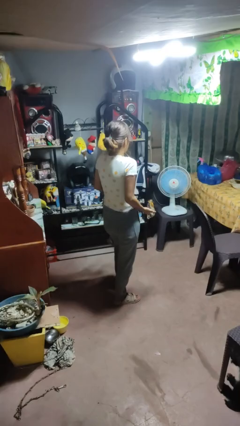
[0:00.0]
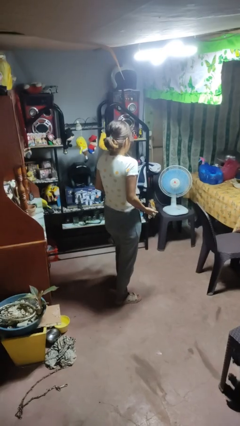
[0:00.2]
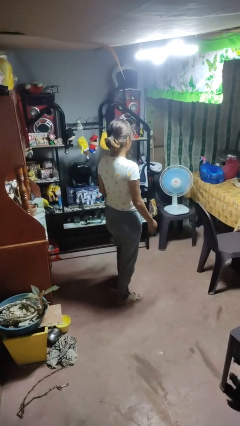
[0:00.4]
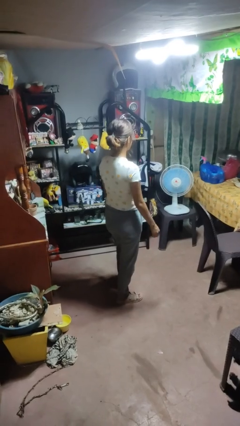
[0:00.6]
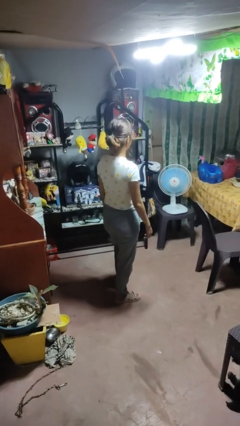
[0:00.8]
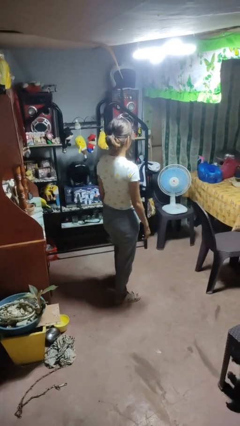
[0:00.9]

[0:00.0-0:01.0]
person shrugs

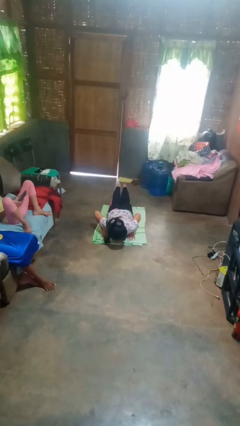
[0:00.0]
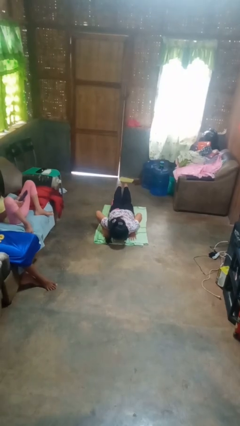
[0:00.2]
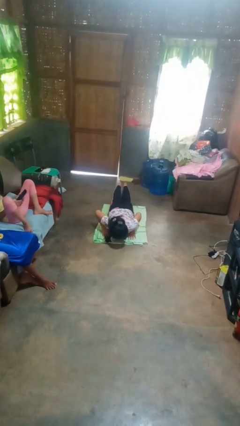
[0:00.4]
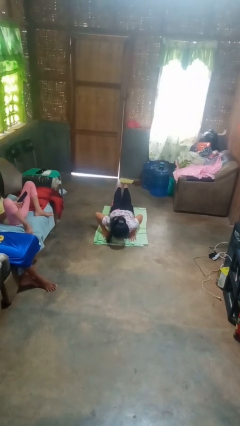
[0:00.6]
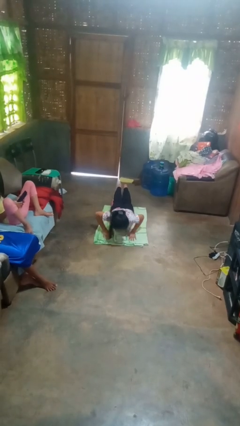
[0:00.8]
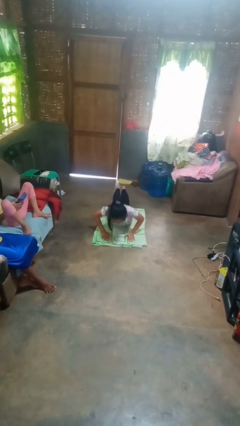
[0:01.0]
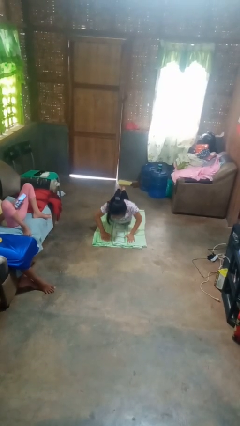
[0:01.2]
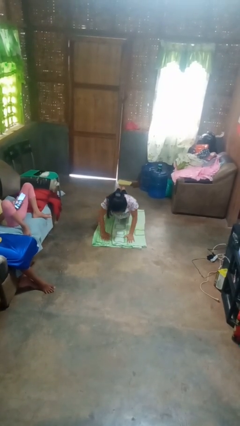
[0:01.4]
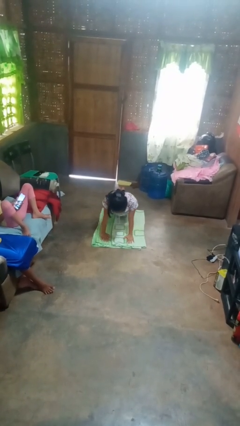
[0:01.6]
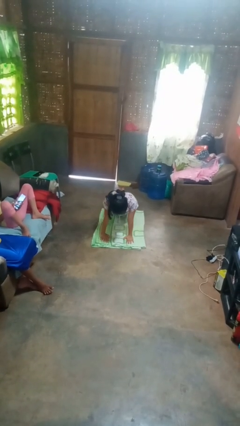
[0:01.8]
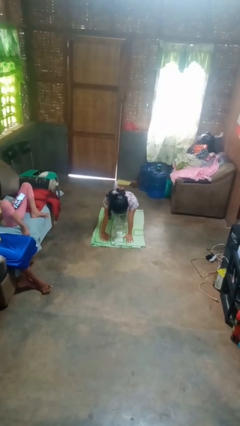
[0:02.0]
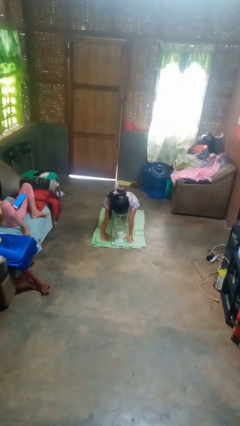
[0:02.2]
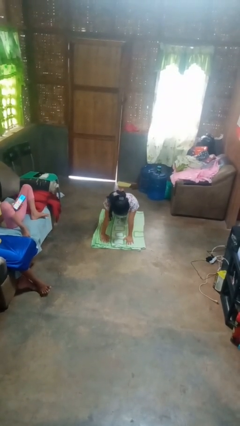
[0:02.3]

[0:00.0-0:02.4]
person exercises with pushup

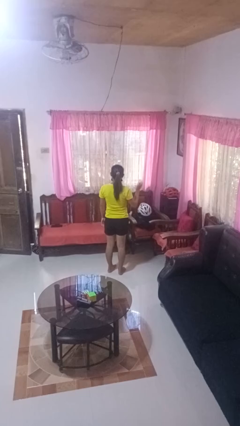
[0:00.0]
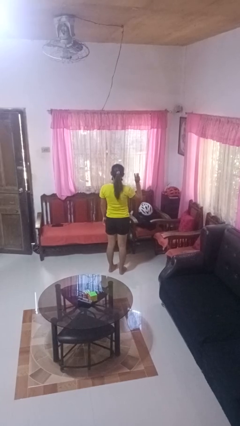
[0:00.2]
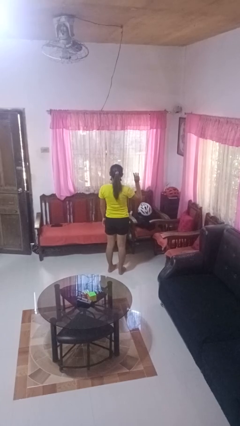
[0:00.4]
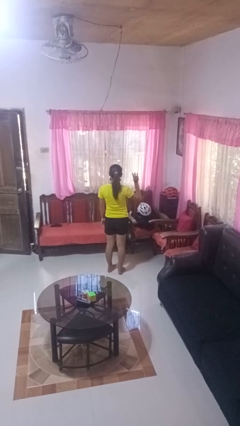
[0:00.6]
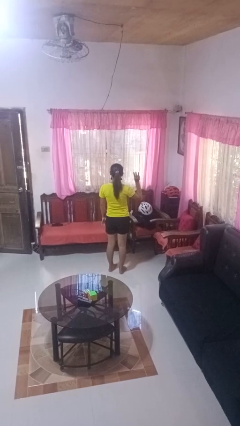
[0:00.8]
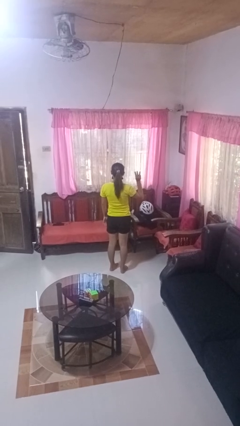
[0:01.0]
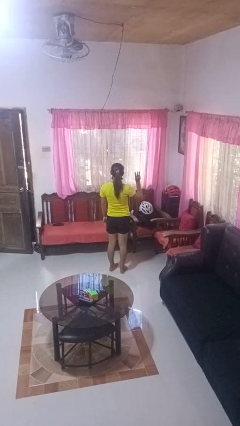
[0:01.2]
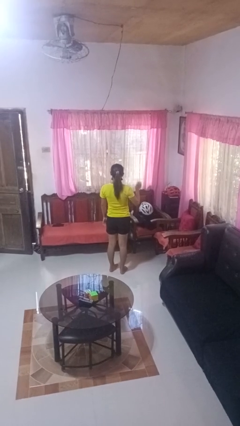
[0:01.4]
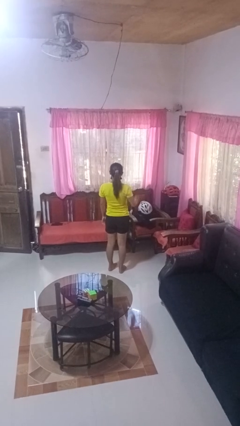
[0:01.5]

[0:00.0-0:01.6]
person gestures number three

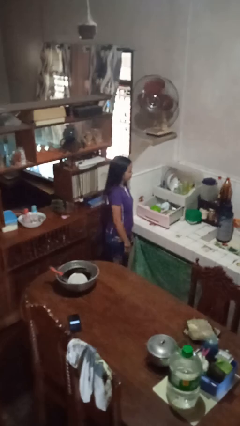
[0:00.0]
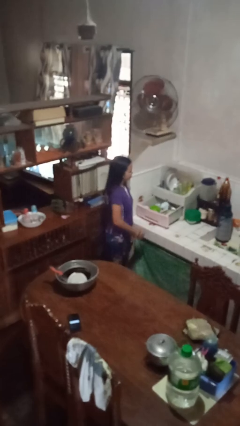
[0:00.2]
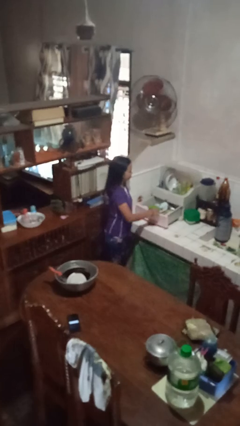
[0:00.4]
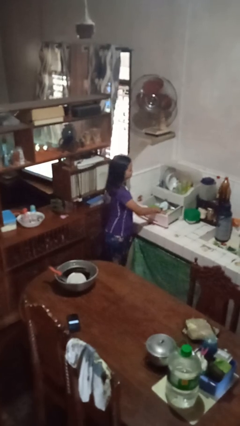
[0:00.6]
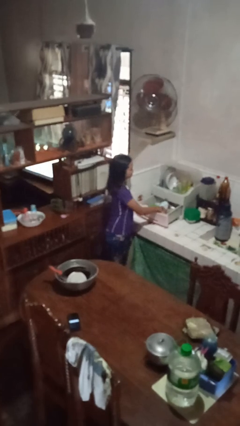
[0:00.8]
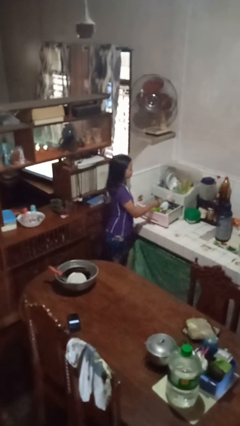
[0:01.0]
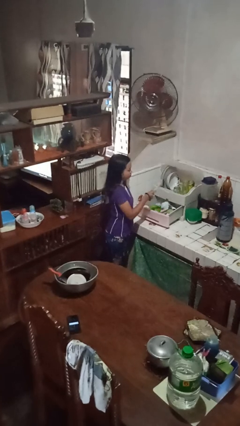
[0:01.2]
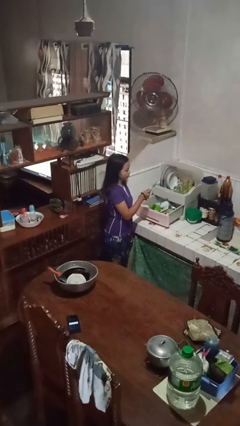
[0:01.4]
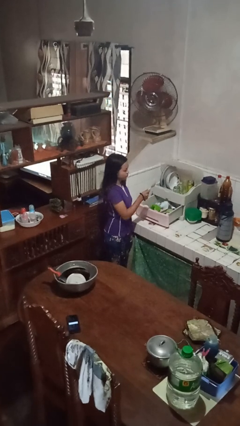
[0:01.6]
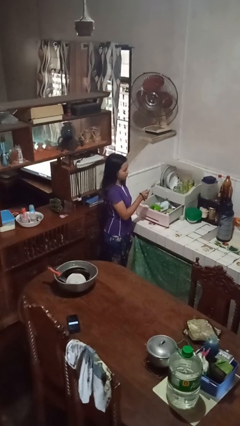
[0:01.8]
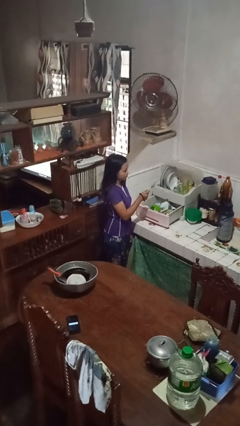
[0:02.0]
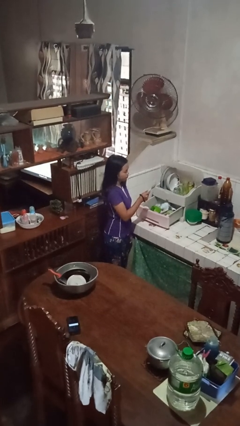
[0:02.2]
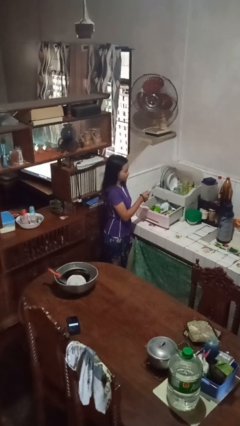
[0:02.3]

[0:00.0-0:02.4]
person takes object from kitchen drawer

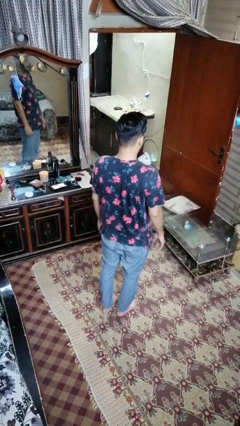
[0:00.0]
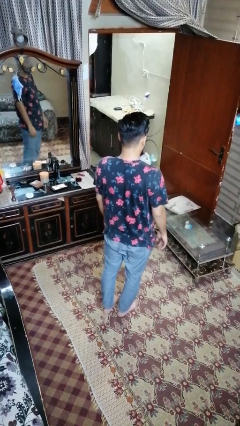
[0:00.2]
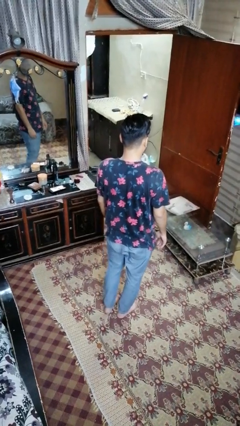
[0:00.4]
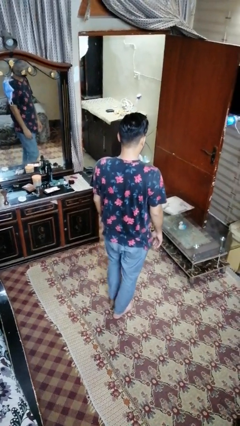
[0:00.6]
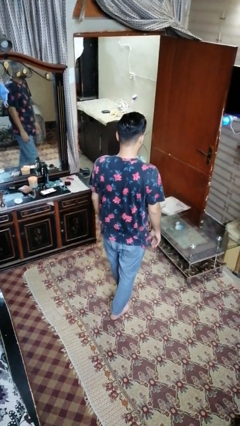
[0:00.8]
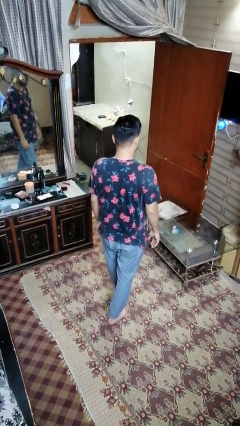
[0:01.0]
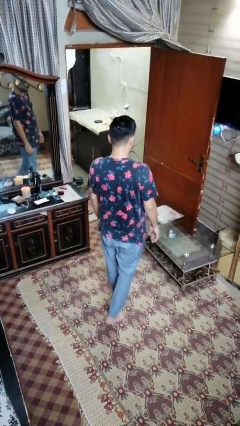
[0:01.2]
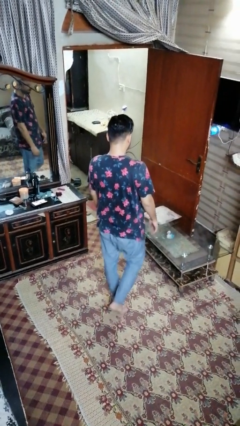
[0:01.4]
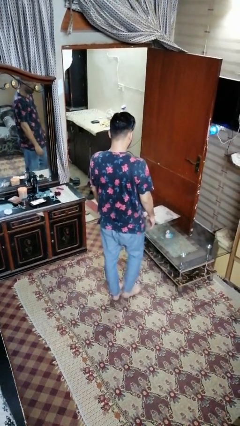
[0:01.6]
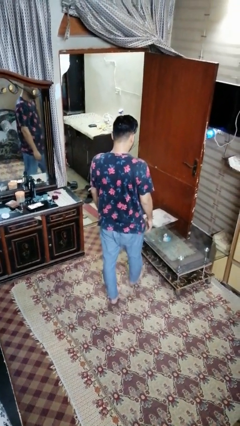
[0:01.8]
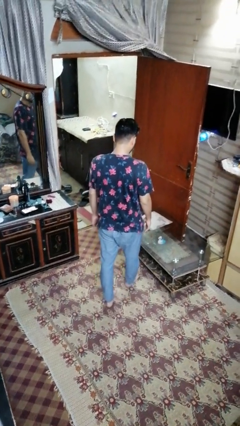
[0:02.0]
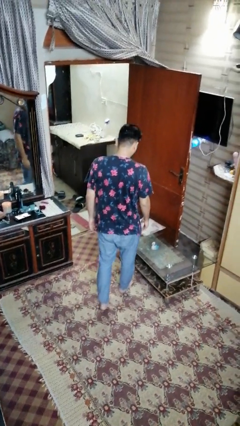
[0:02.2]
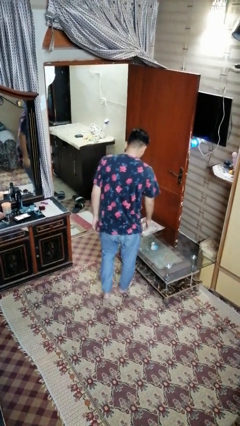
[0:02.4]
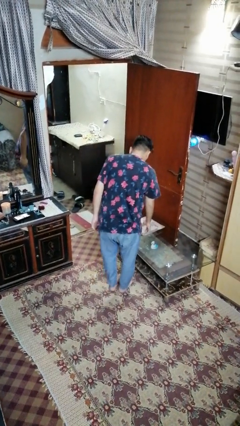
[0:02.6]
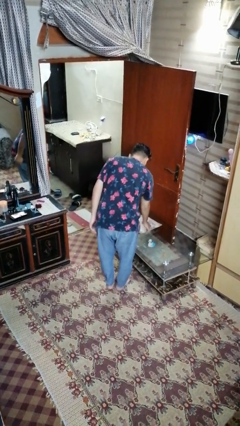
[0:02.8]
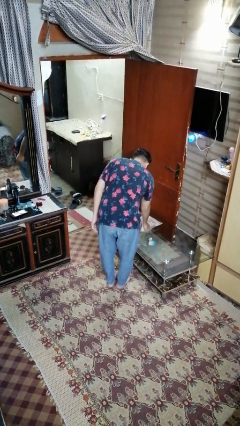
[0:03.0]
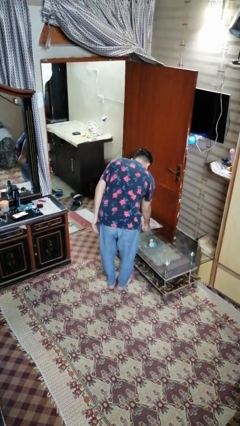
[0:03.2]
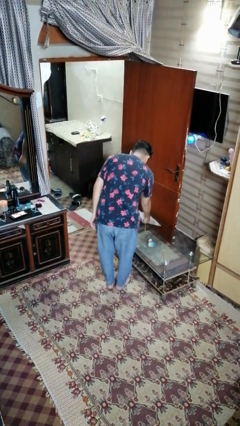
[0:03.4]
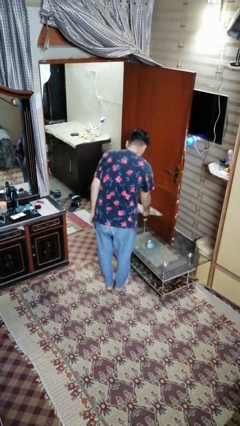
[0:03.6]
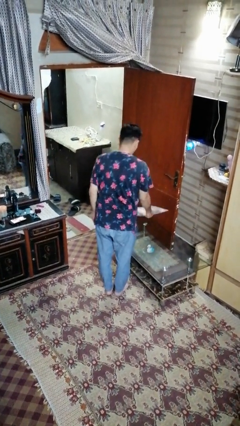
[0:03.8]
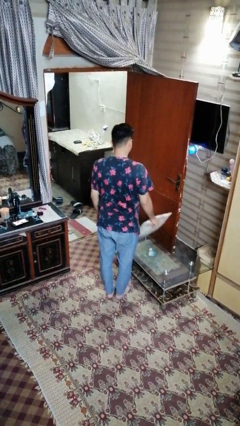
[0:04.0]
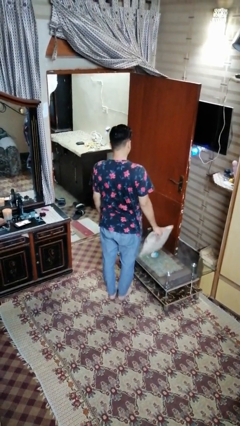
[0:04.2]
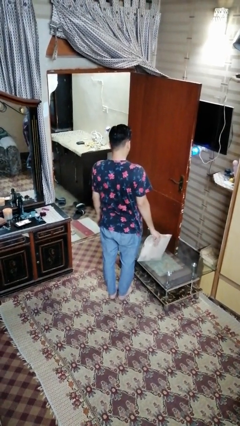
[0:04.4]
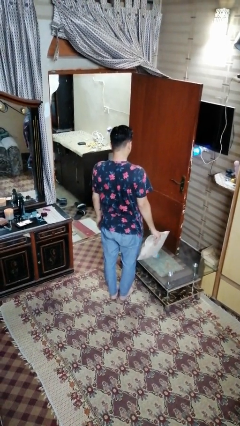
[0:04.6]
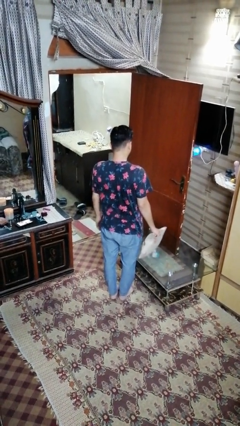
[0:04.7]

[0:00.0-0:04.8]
person picks up object from table

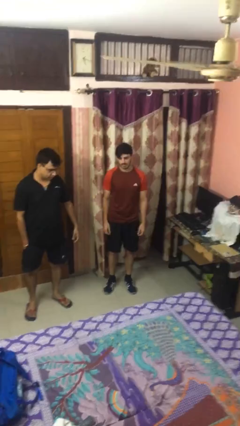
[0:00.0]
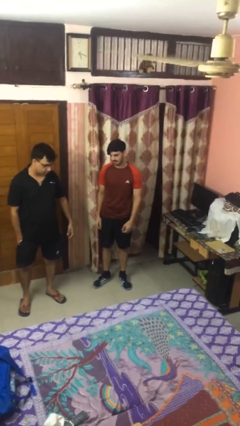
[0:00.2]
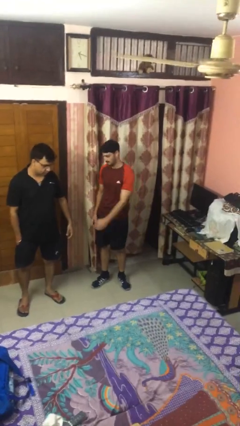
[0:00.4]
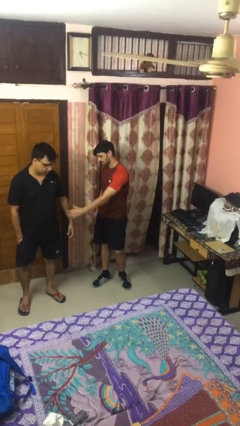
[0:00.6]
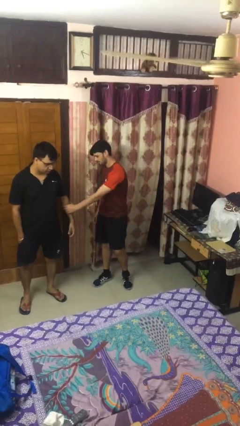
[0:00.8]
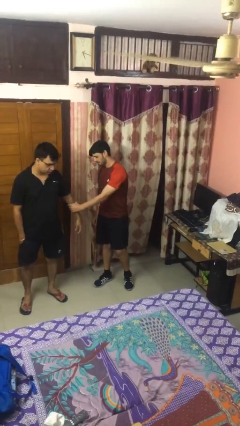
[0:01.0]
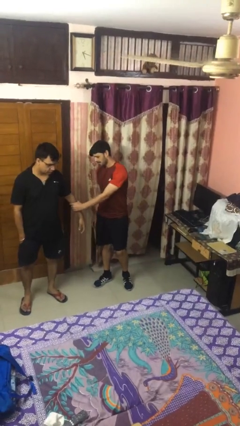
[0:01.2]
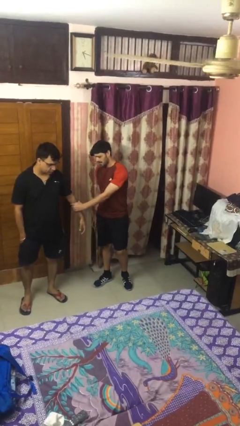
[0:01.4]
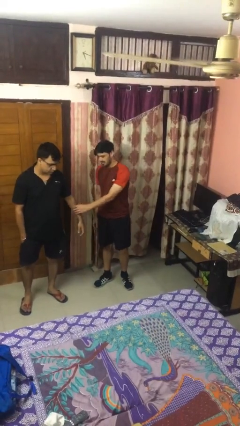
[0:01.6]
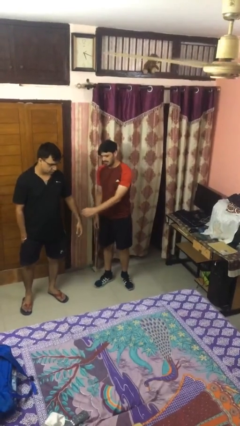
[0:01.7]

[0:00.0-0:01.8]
person grabs person by forearm

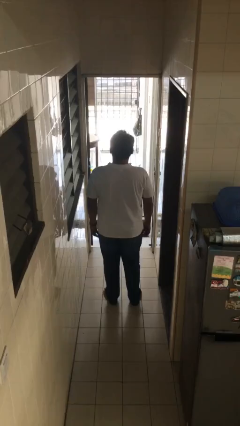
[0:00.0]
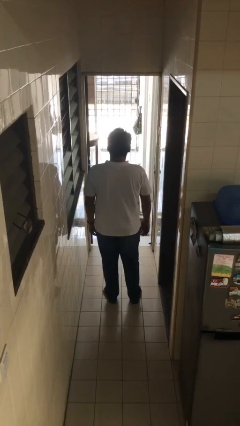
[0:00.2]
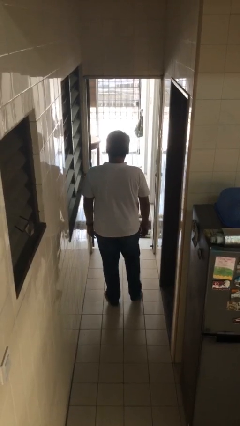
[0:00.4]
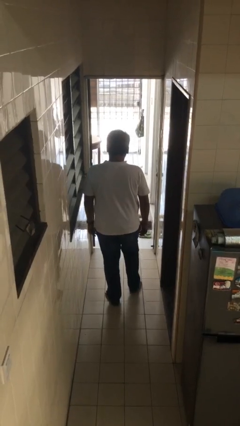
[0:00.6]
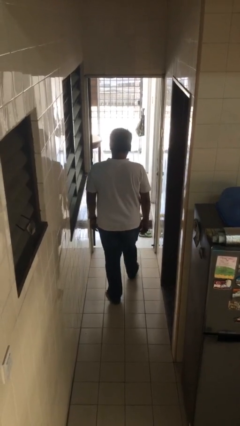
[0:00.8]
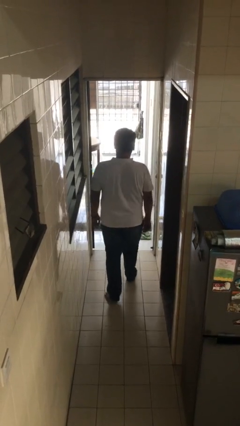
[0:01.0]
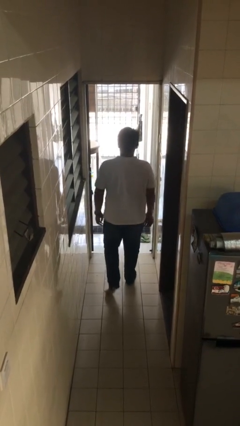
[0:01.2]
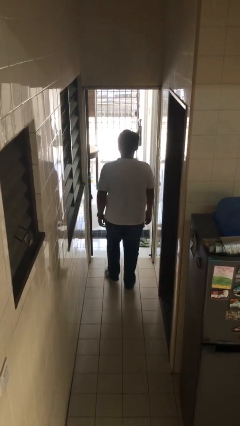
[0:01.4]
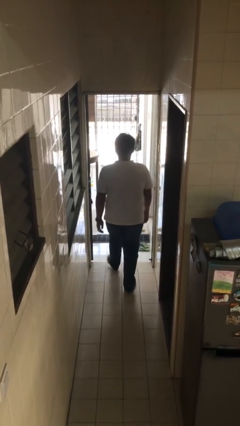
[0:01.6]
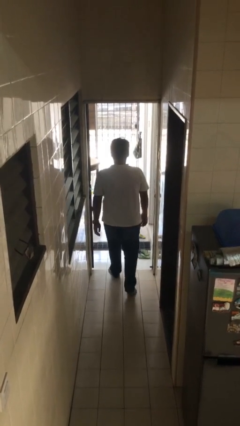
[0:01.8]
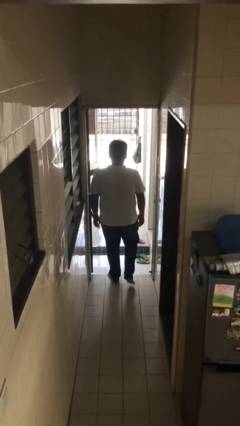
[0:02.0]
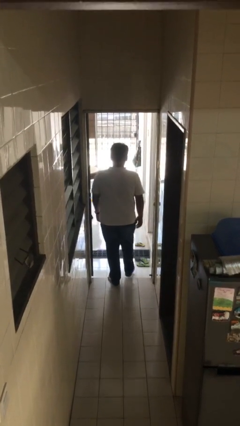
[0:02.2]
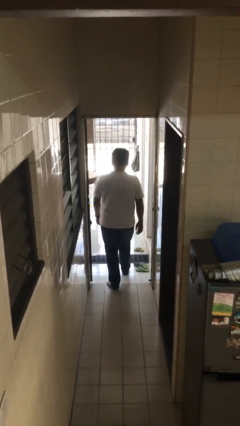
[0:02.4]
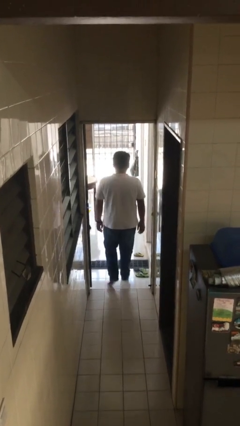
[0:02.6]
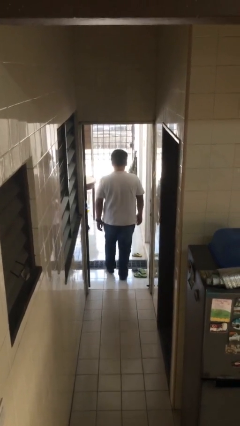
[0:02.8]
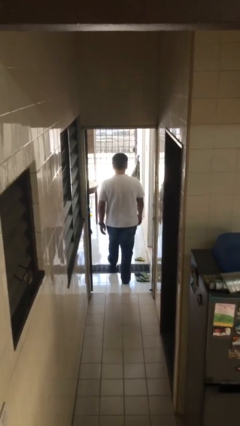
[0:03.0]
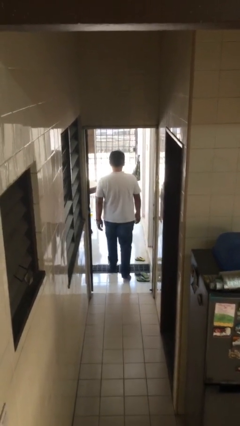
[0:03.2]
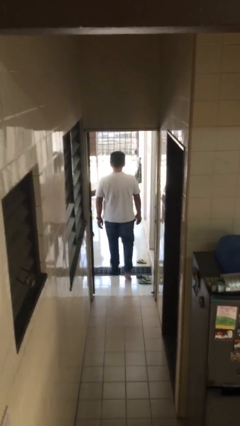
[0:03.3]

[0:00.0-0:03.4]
person exits scene through structure
